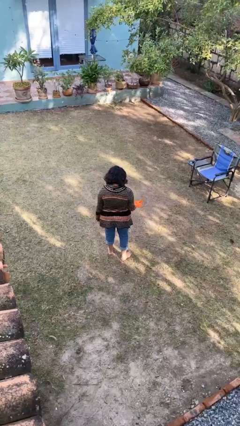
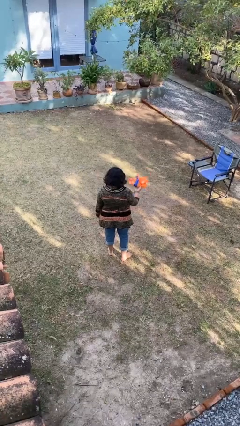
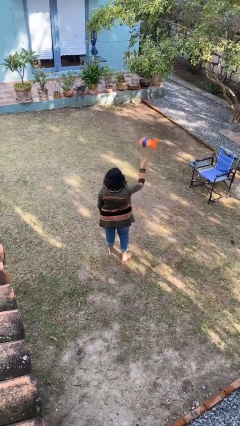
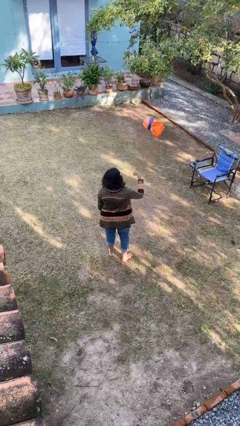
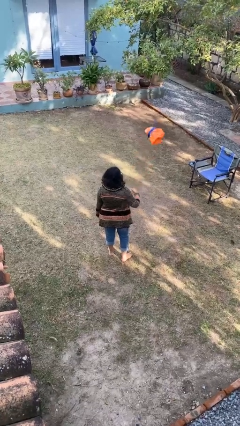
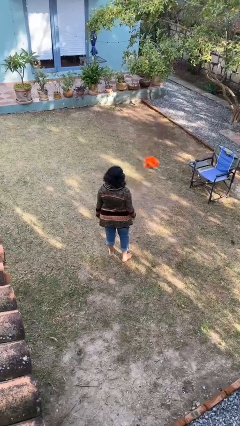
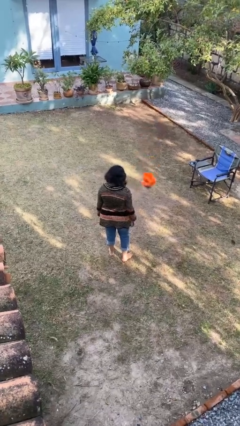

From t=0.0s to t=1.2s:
person throws object into air

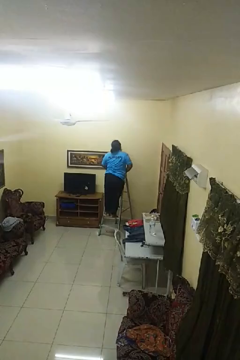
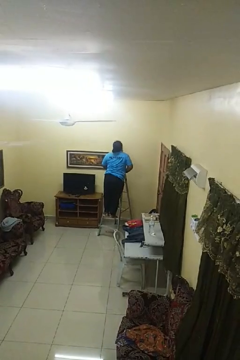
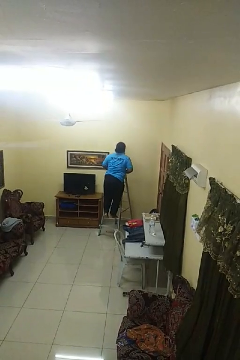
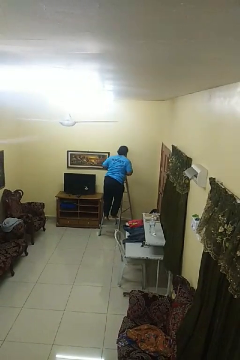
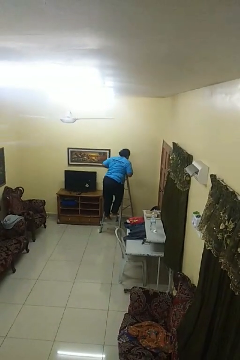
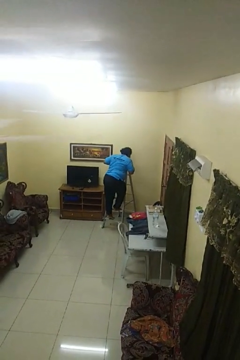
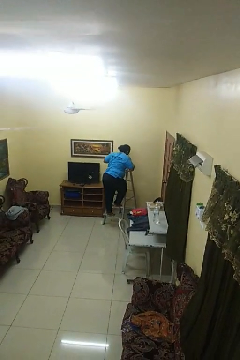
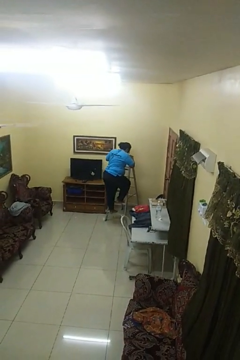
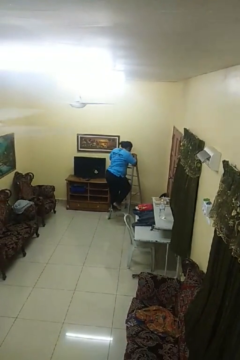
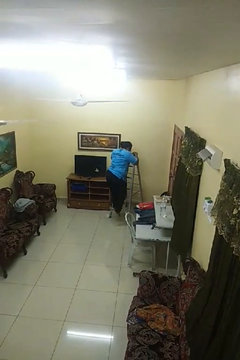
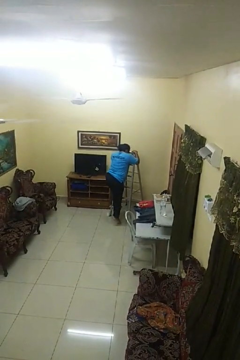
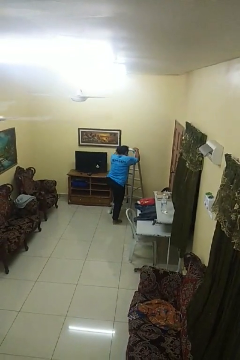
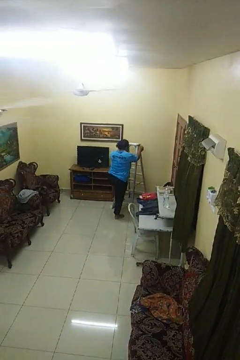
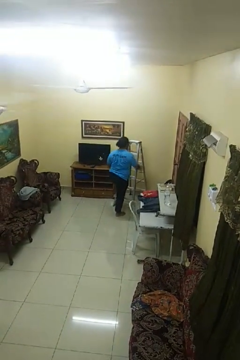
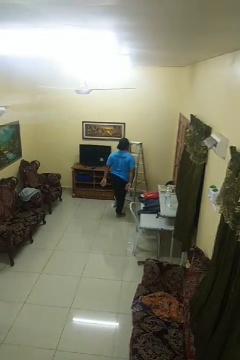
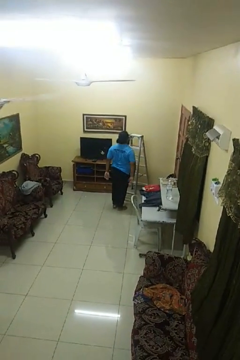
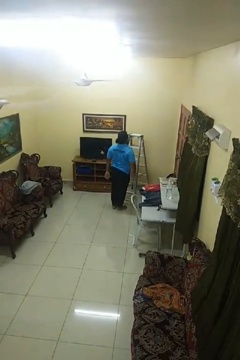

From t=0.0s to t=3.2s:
person climbs down ladder

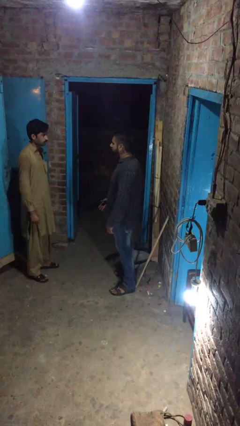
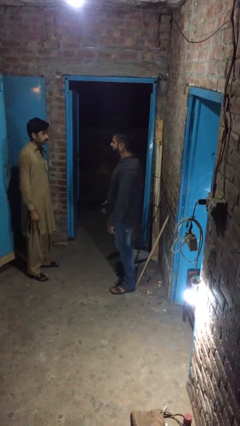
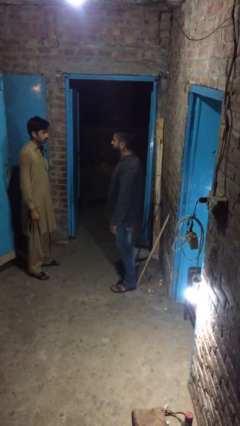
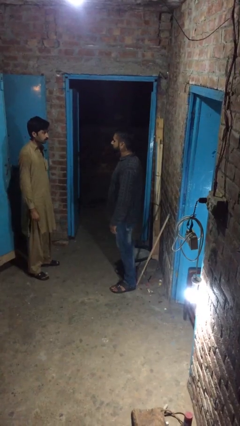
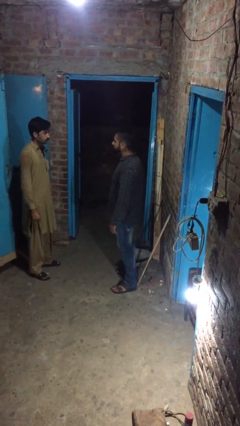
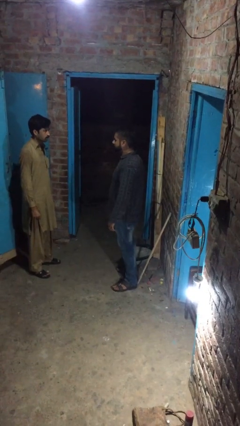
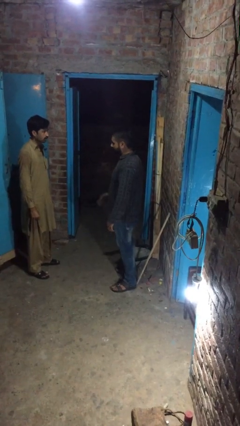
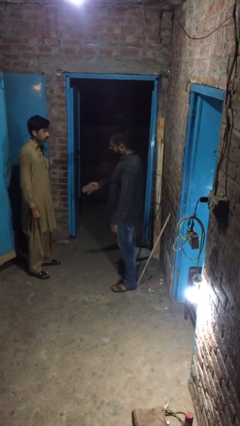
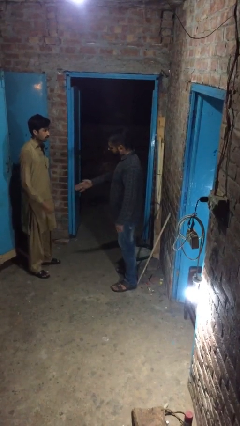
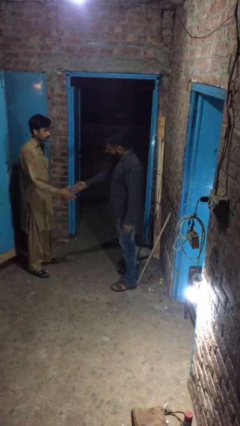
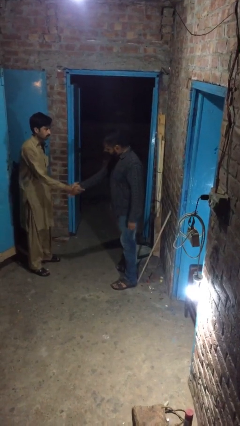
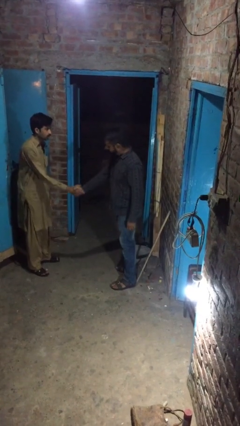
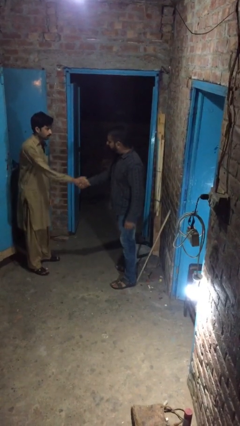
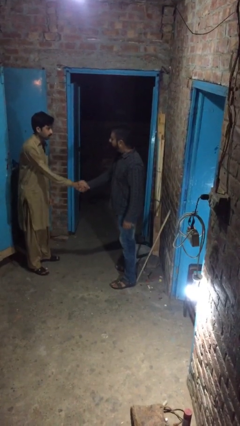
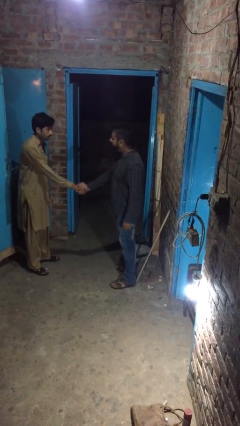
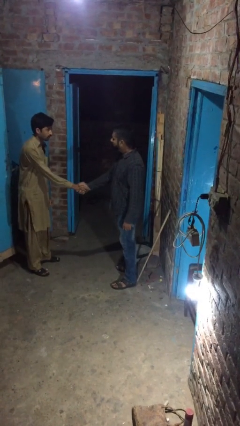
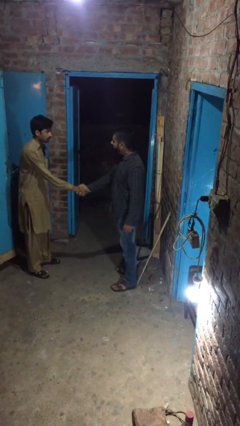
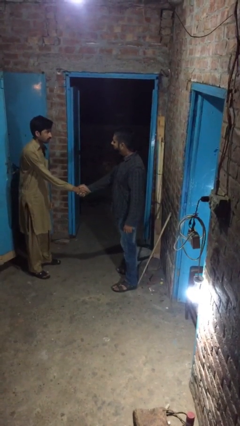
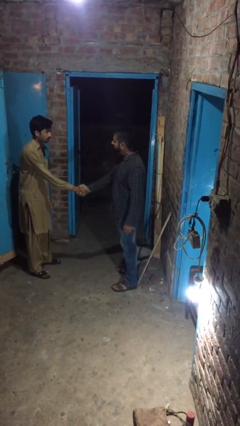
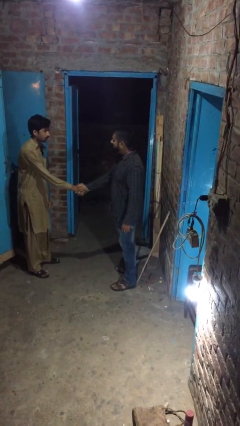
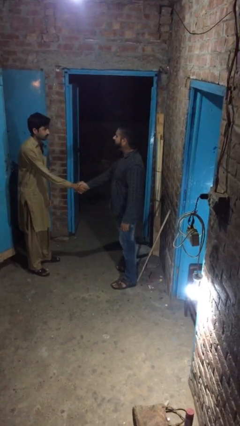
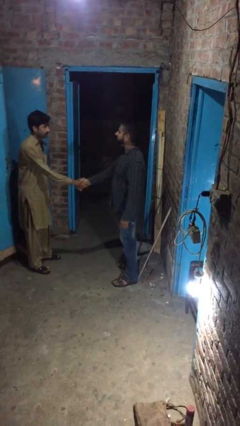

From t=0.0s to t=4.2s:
person shakes hand

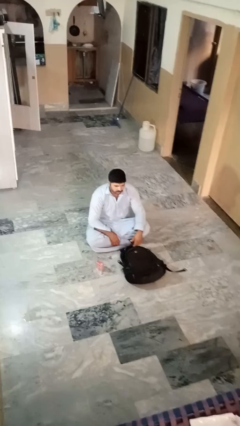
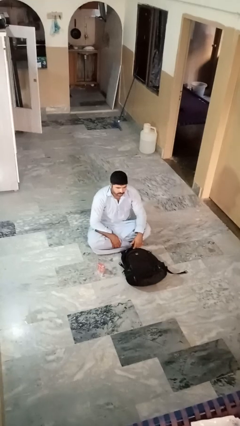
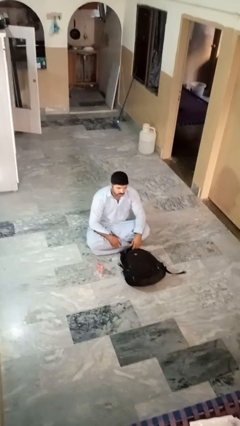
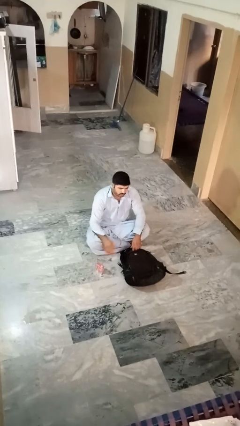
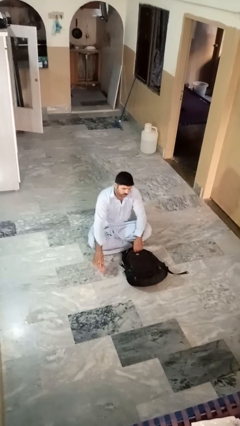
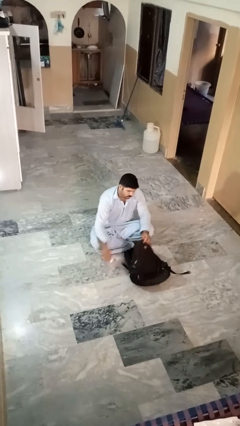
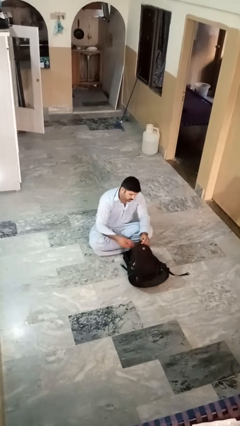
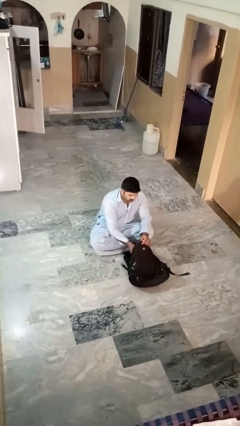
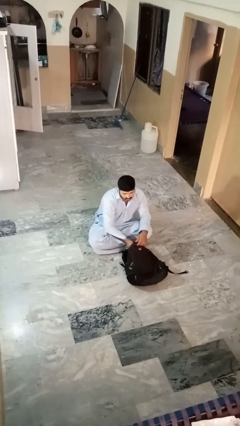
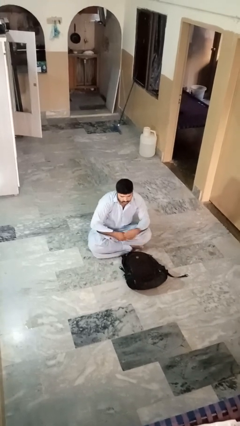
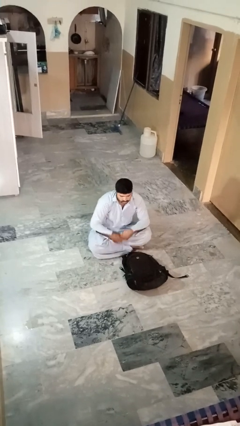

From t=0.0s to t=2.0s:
person puts object into bag

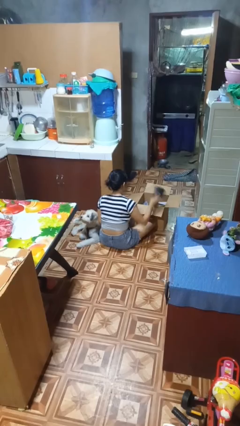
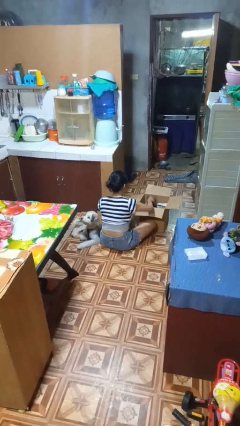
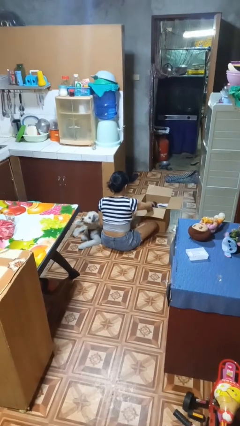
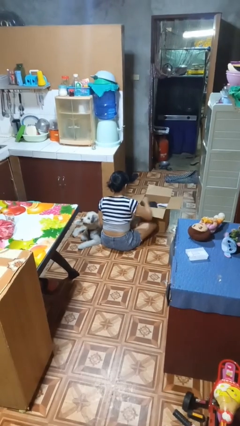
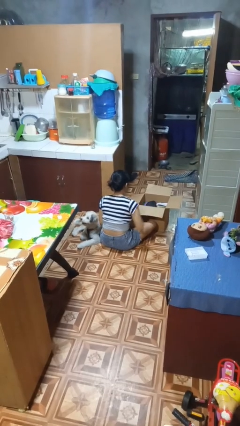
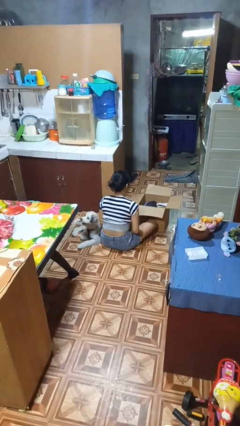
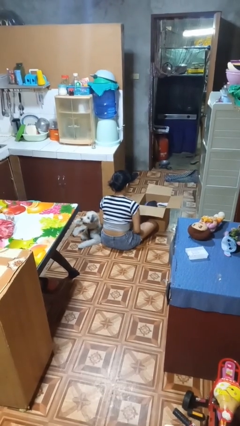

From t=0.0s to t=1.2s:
person puts object into box

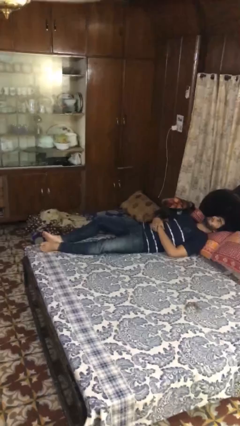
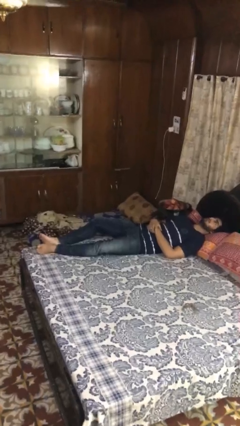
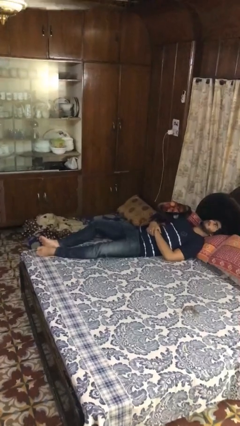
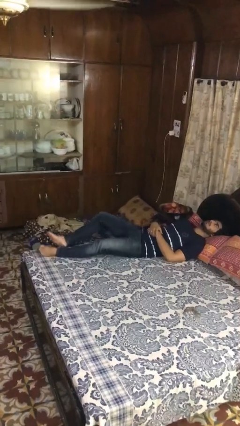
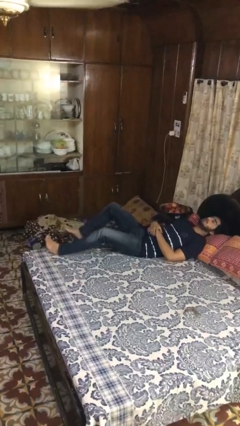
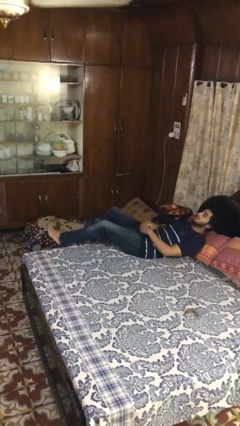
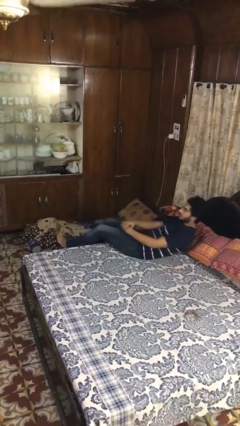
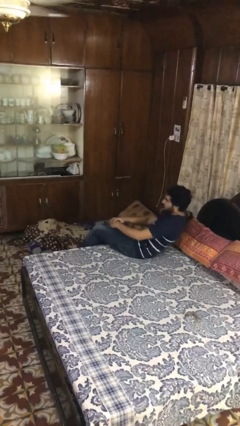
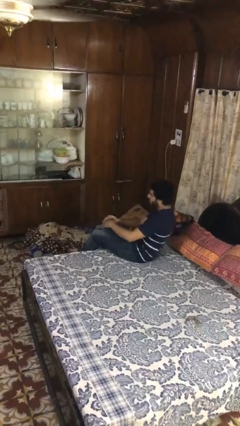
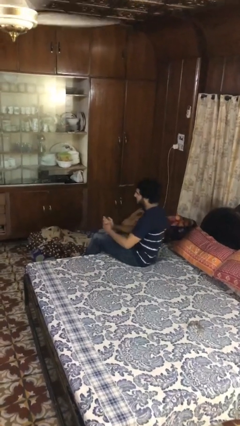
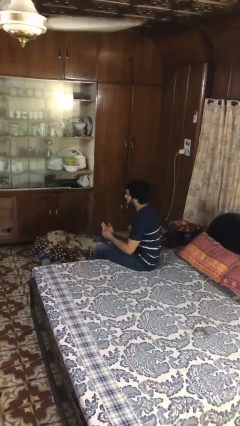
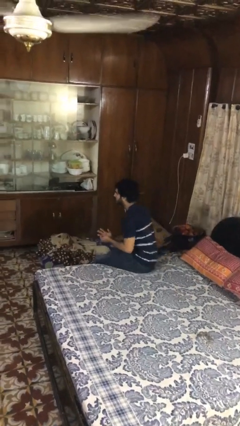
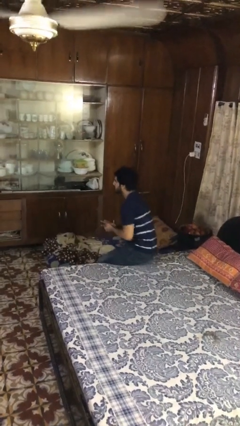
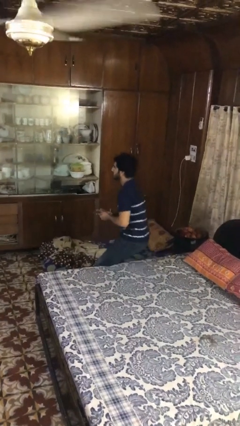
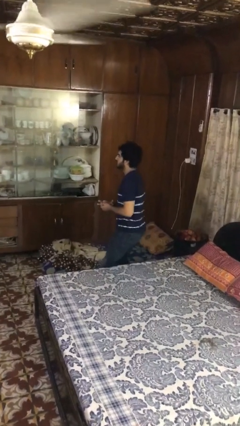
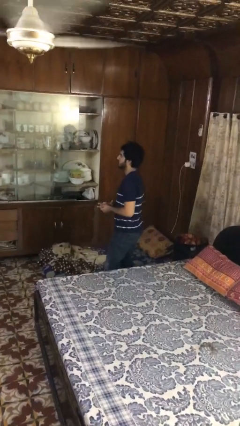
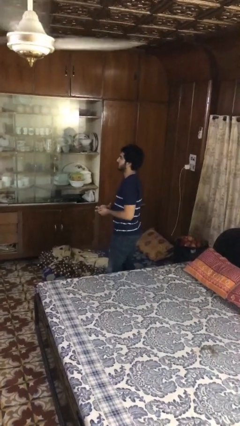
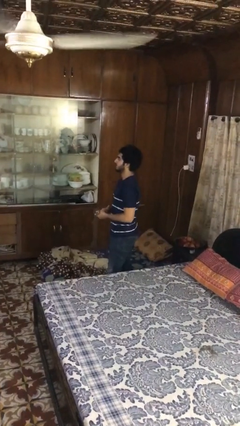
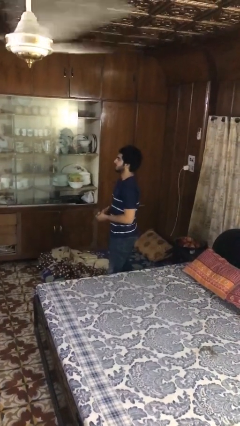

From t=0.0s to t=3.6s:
person stands up

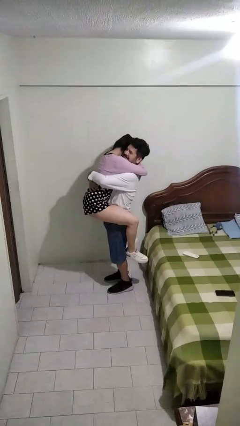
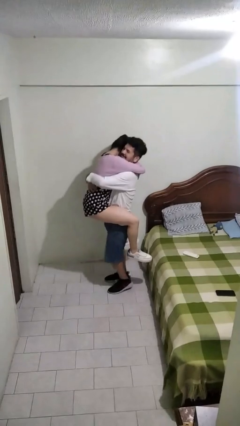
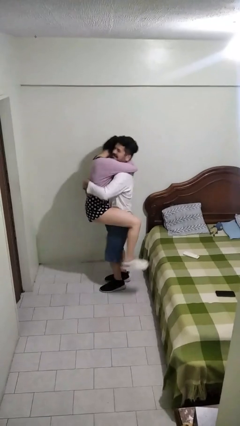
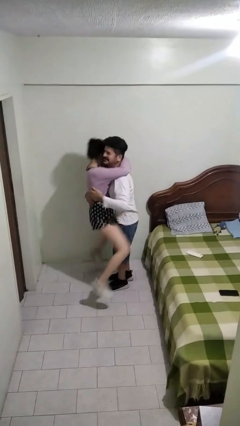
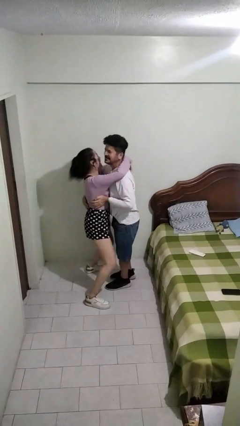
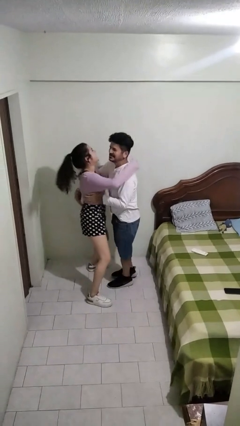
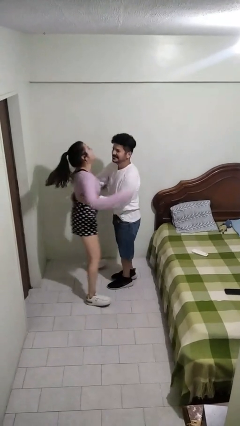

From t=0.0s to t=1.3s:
person puts down person

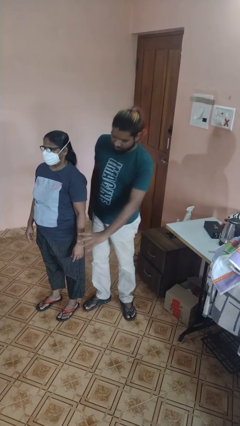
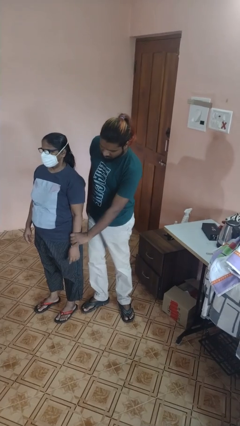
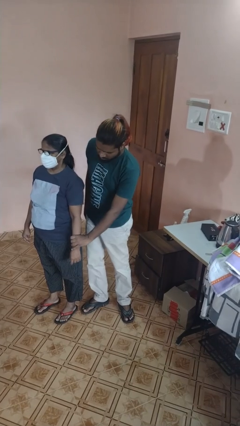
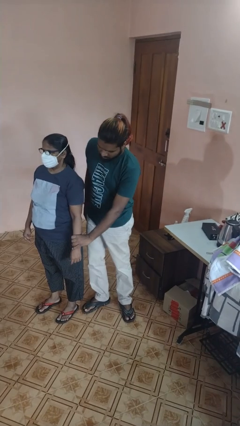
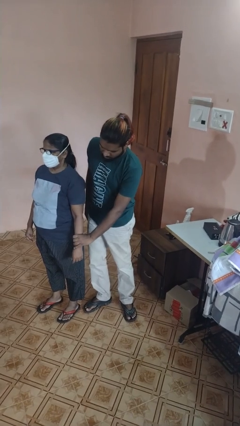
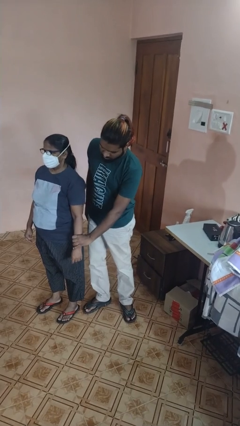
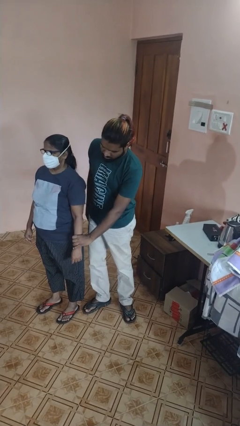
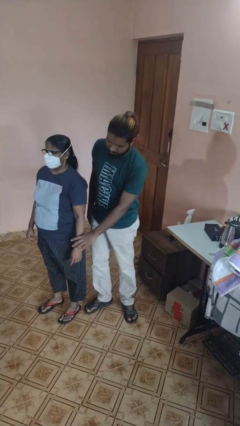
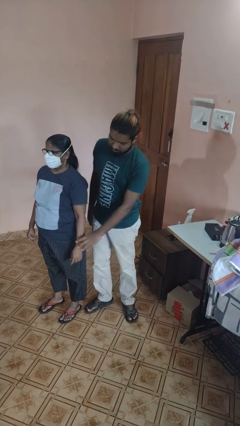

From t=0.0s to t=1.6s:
person grabs person by forearm
